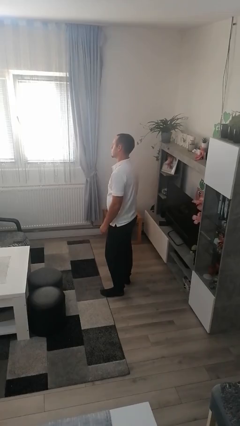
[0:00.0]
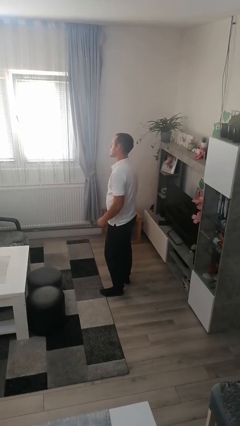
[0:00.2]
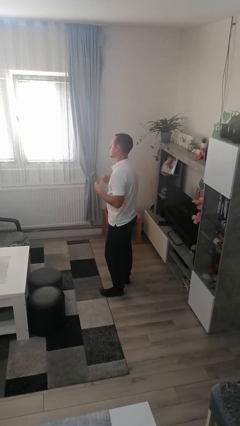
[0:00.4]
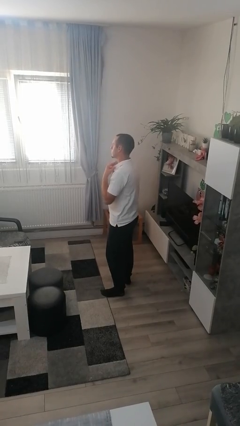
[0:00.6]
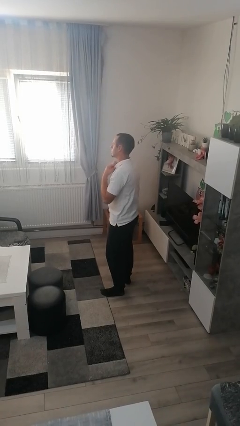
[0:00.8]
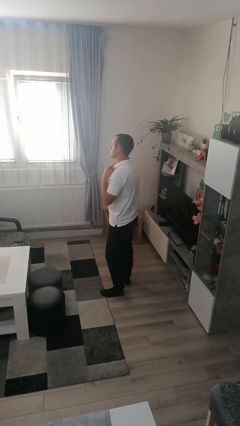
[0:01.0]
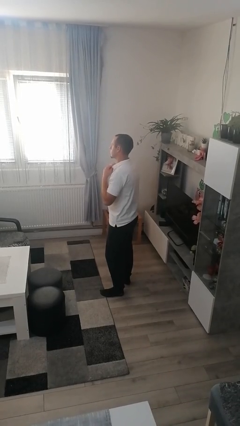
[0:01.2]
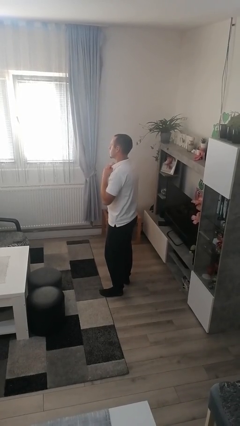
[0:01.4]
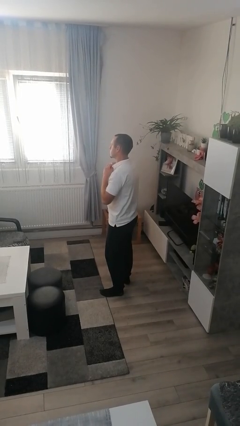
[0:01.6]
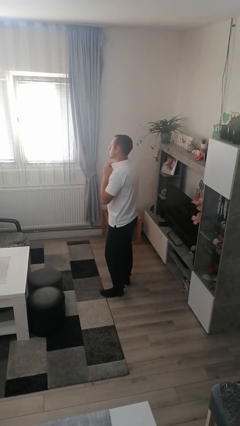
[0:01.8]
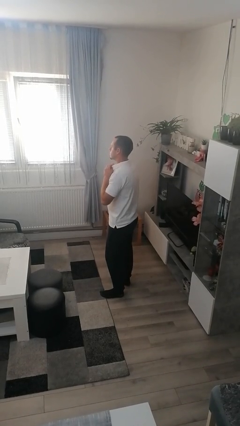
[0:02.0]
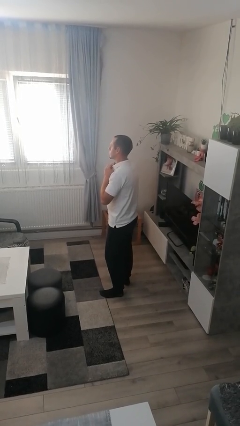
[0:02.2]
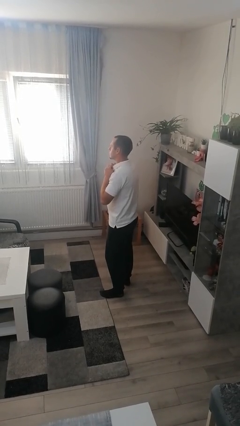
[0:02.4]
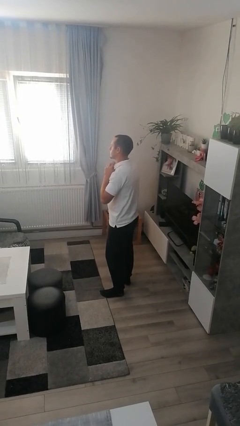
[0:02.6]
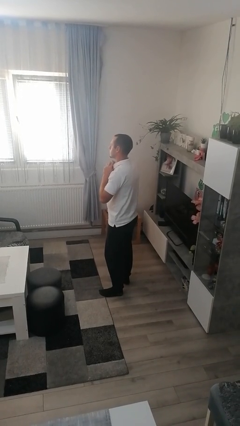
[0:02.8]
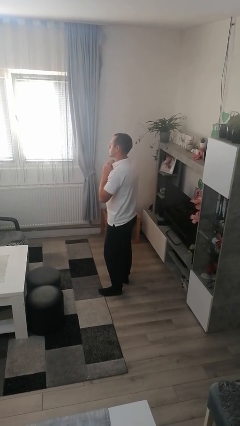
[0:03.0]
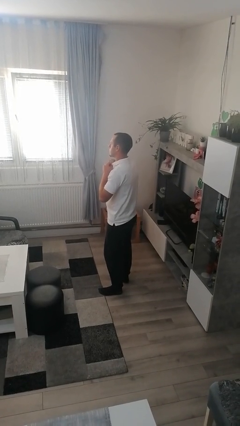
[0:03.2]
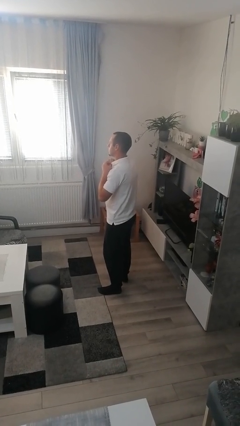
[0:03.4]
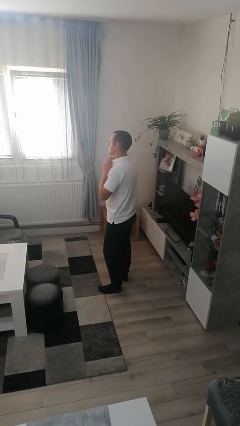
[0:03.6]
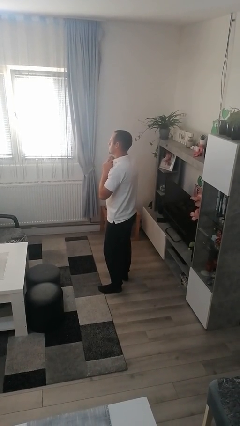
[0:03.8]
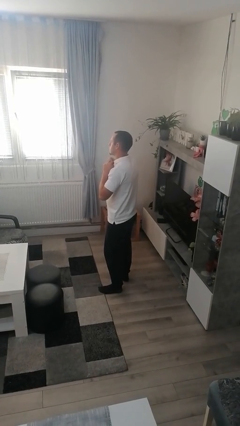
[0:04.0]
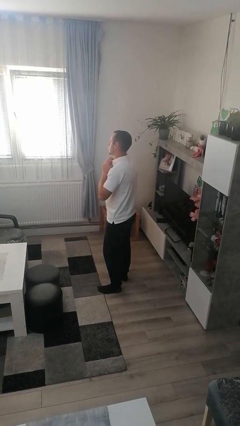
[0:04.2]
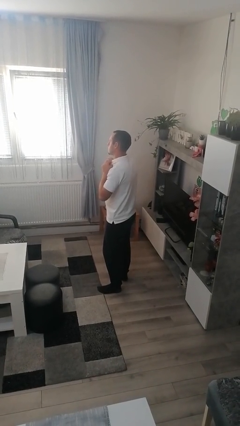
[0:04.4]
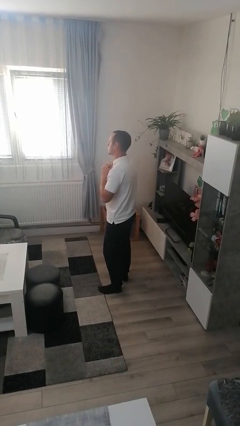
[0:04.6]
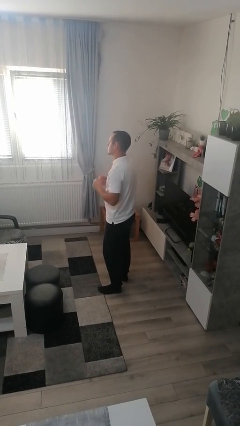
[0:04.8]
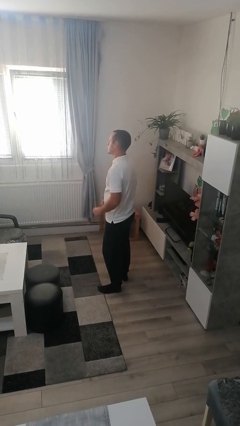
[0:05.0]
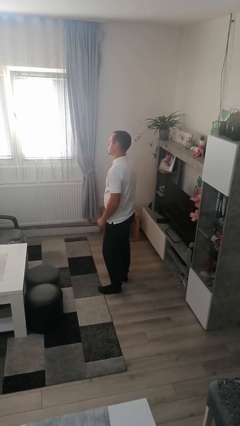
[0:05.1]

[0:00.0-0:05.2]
person buttons shirt

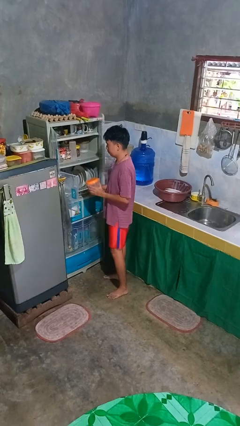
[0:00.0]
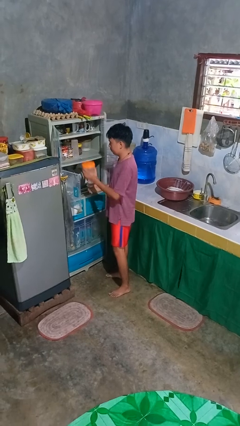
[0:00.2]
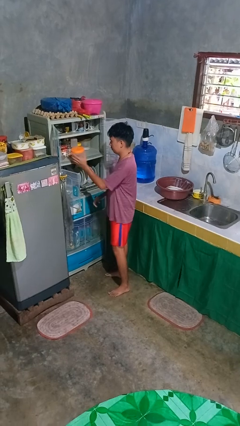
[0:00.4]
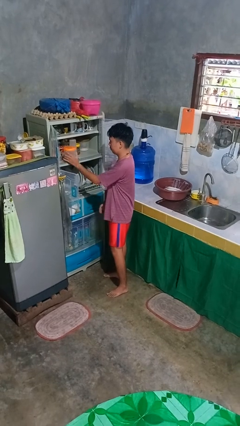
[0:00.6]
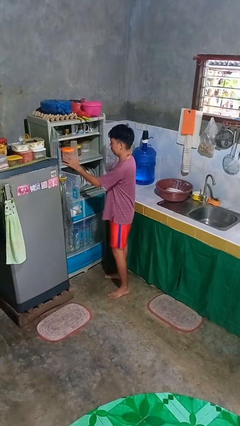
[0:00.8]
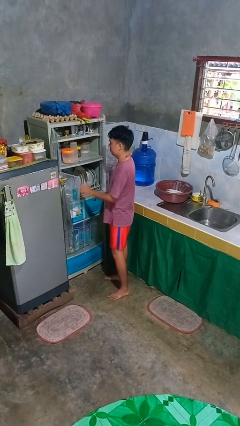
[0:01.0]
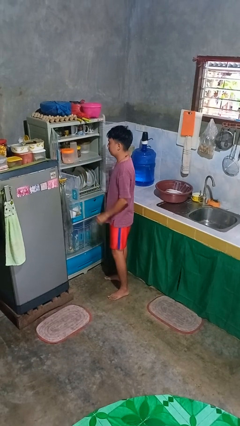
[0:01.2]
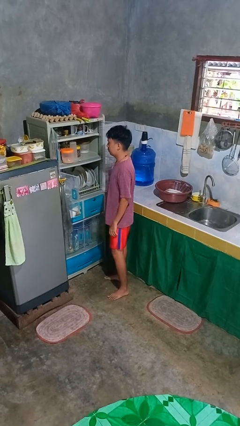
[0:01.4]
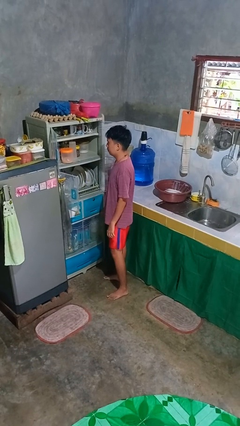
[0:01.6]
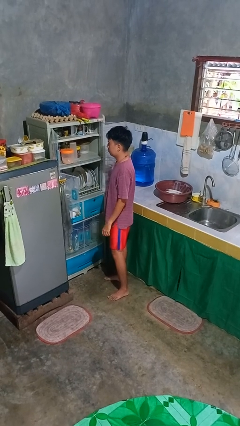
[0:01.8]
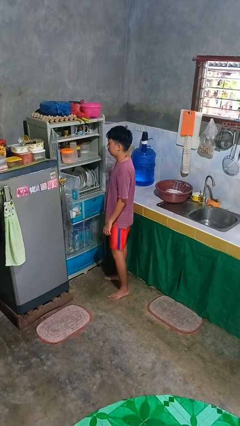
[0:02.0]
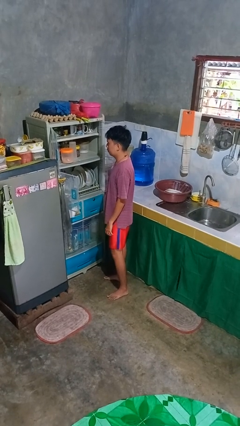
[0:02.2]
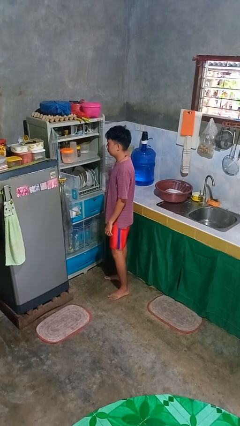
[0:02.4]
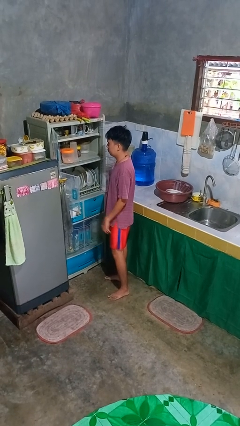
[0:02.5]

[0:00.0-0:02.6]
person puts object in cabinet

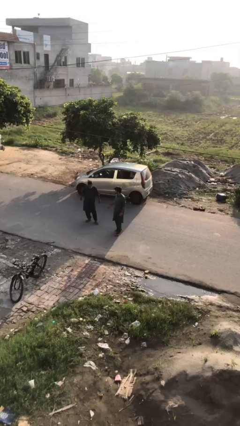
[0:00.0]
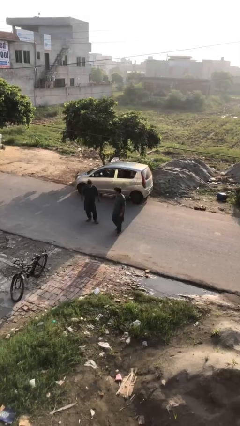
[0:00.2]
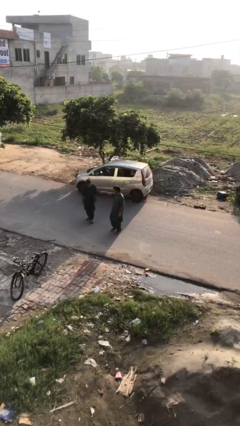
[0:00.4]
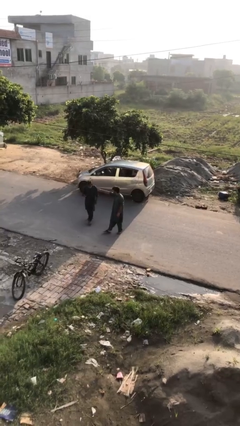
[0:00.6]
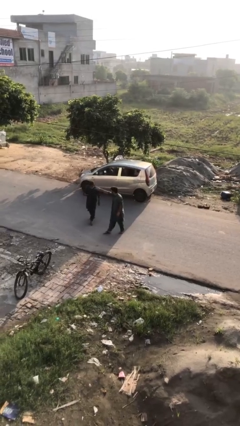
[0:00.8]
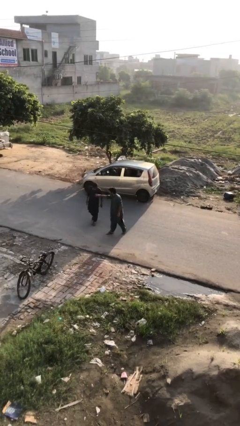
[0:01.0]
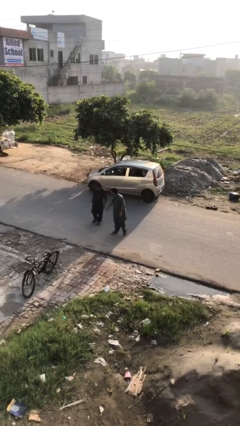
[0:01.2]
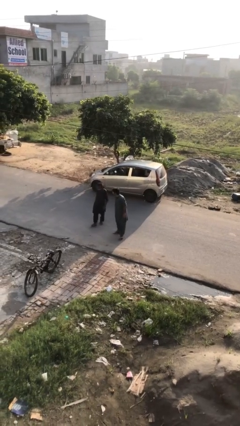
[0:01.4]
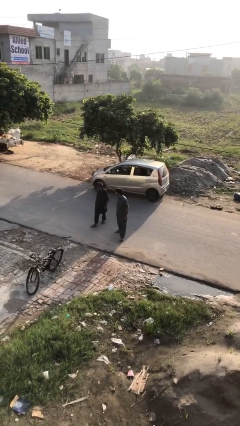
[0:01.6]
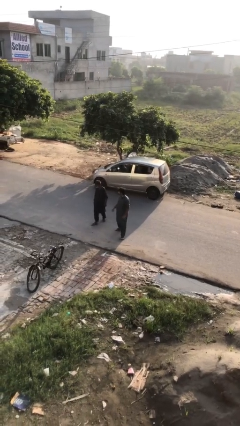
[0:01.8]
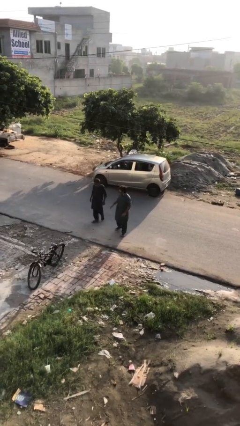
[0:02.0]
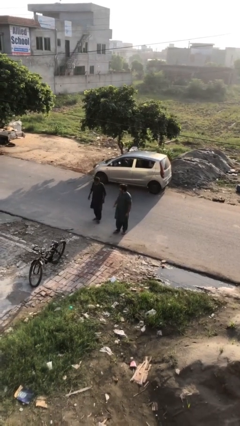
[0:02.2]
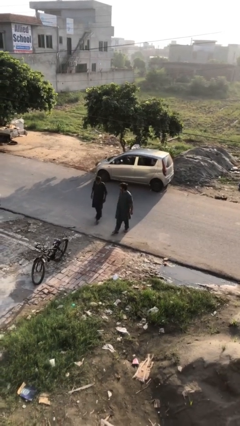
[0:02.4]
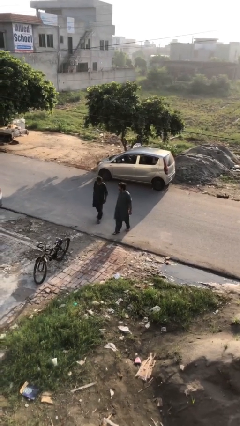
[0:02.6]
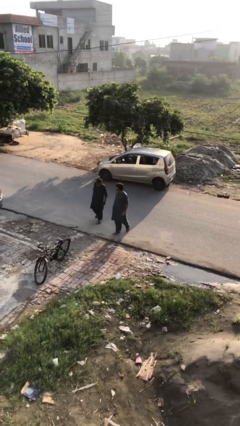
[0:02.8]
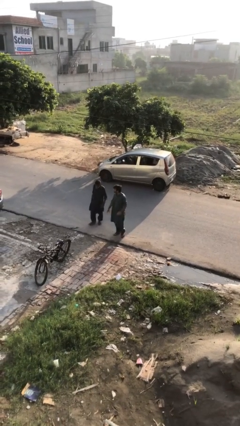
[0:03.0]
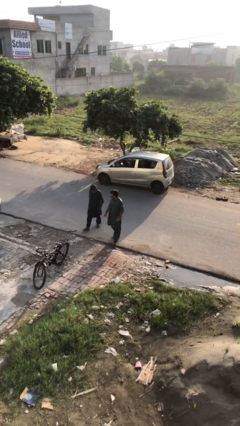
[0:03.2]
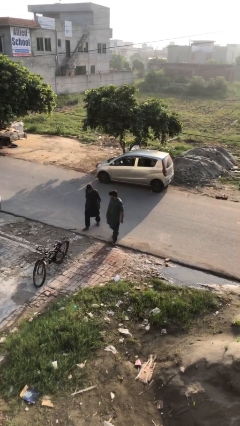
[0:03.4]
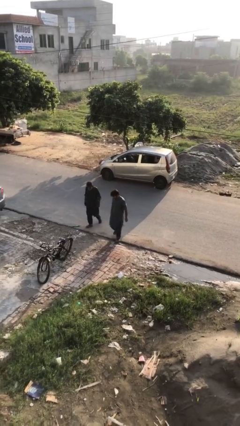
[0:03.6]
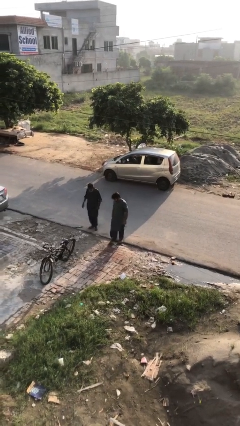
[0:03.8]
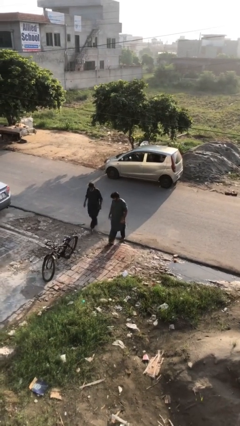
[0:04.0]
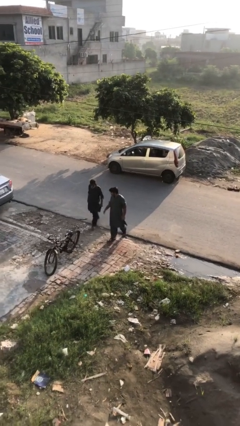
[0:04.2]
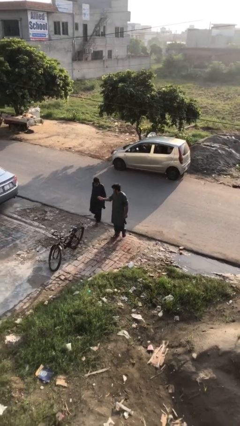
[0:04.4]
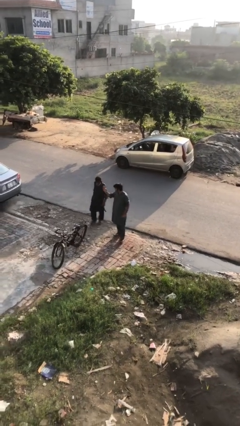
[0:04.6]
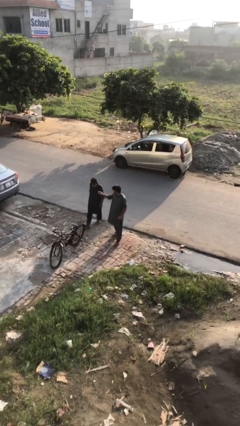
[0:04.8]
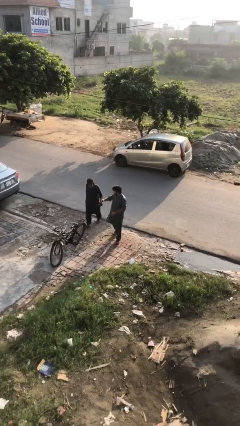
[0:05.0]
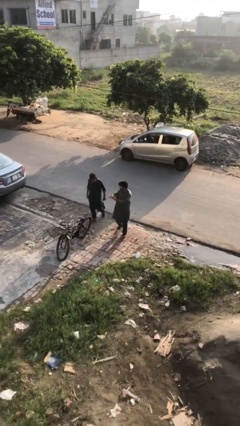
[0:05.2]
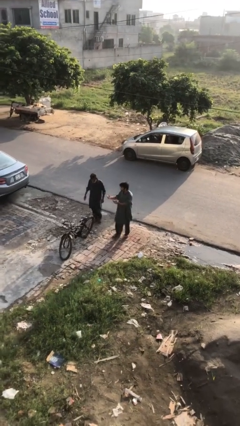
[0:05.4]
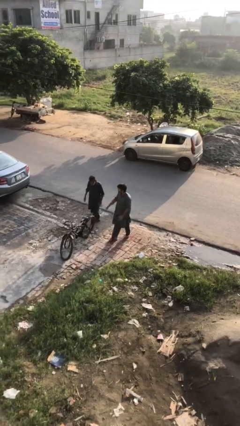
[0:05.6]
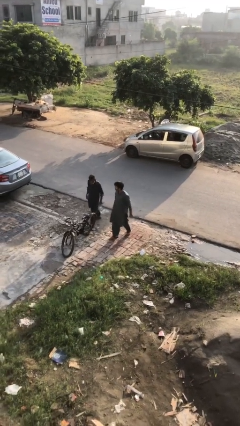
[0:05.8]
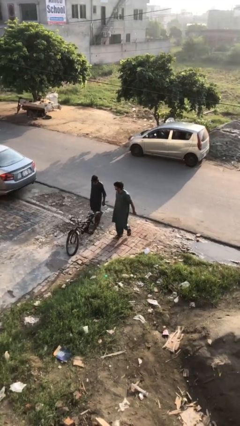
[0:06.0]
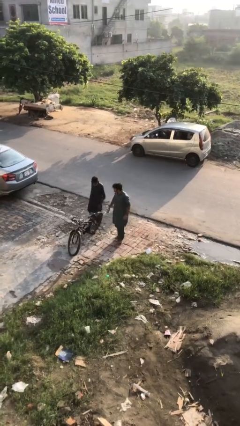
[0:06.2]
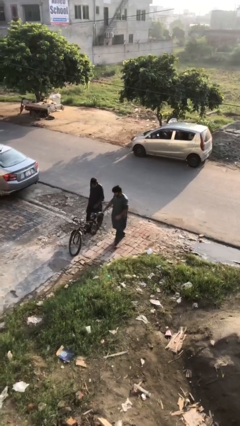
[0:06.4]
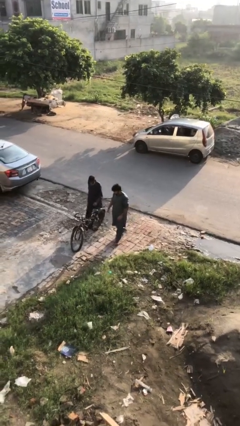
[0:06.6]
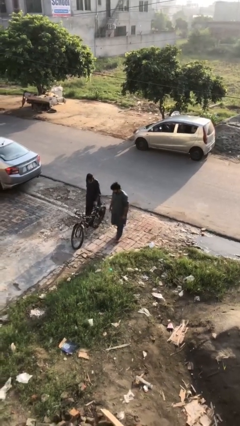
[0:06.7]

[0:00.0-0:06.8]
person talks to person

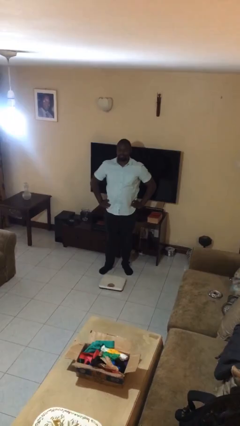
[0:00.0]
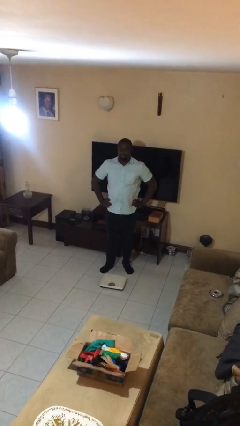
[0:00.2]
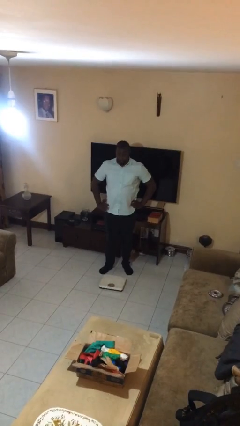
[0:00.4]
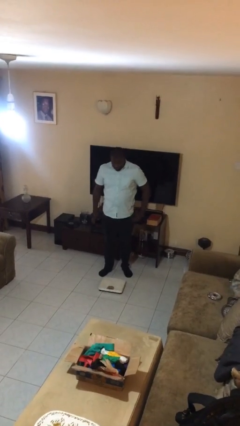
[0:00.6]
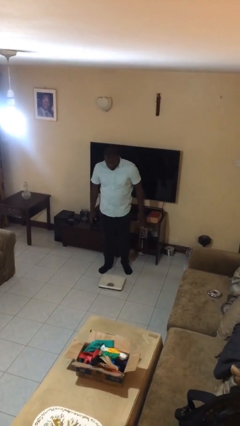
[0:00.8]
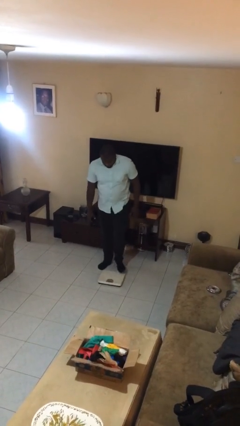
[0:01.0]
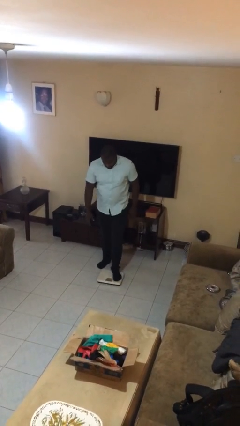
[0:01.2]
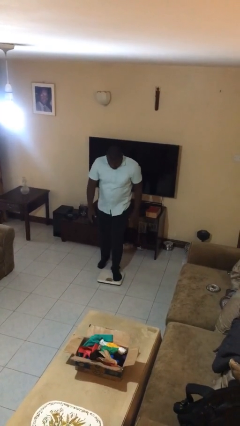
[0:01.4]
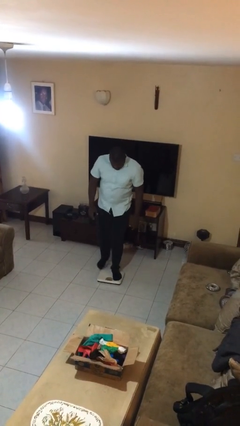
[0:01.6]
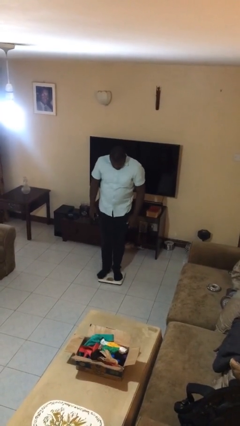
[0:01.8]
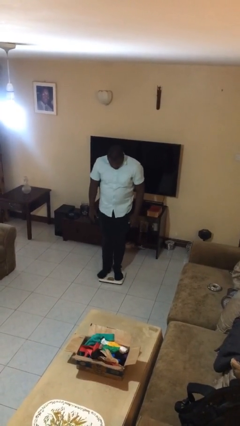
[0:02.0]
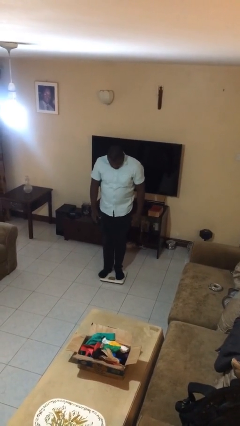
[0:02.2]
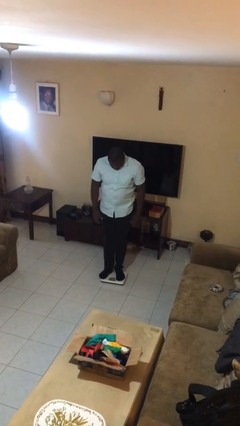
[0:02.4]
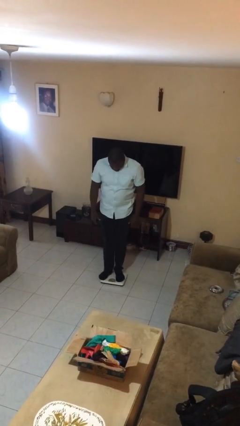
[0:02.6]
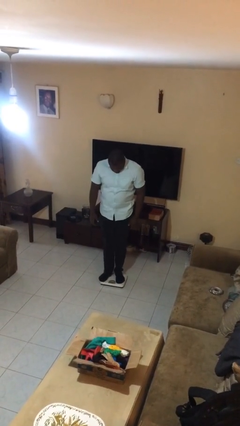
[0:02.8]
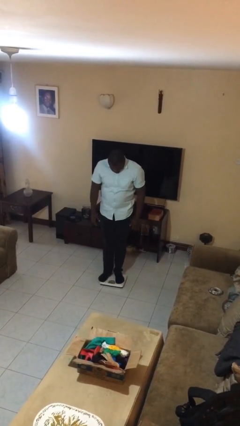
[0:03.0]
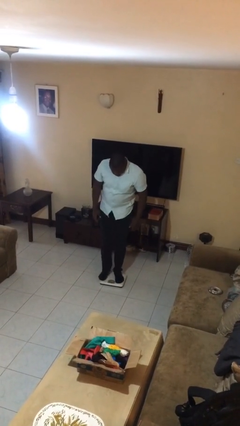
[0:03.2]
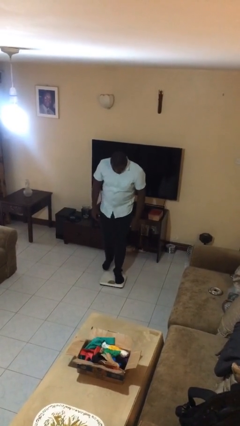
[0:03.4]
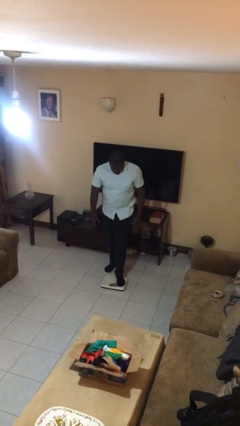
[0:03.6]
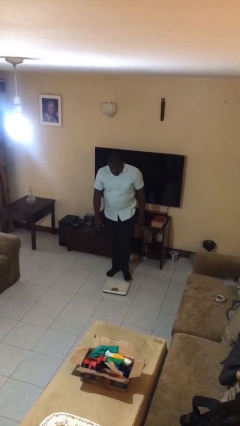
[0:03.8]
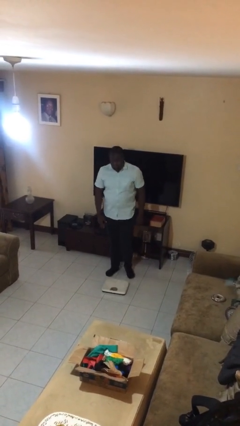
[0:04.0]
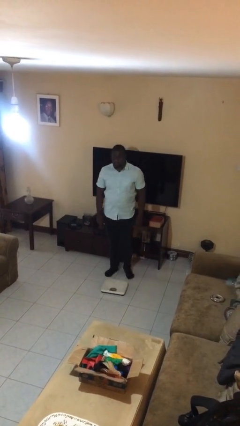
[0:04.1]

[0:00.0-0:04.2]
person uses bodyweight scale
